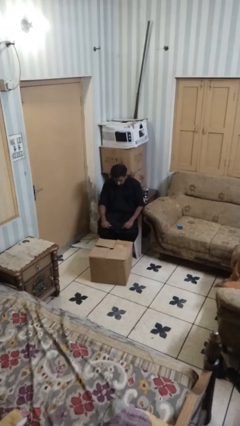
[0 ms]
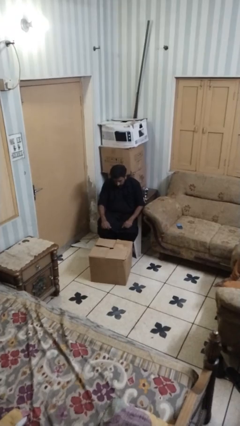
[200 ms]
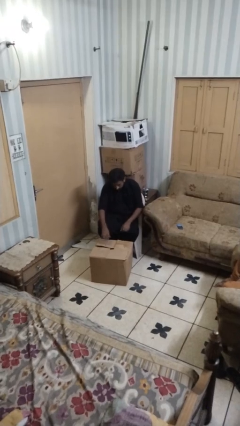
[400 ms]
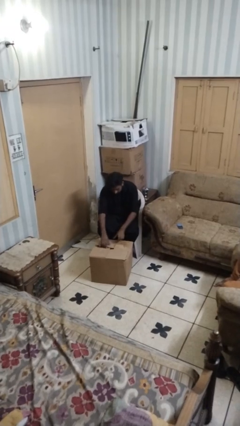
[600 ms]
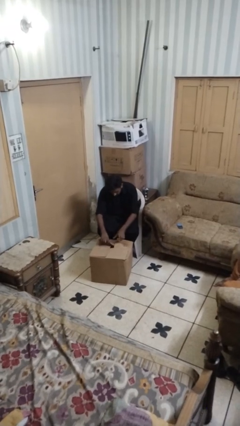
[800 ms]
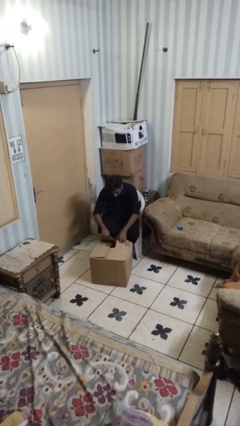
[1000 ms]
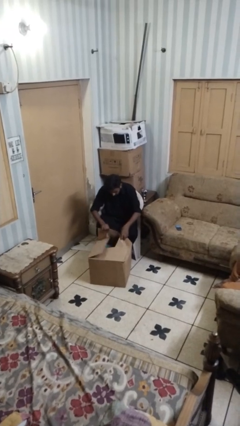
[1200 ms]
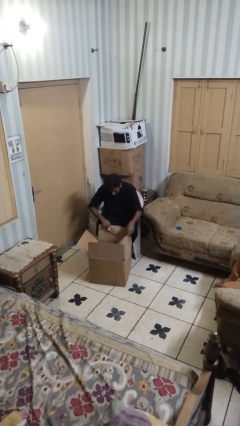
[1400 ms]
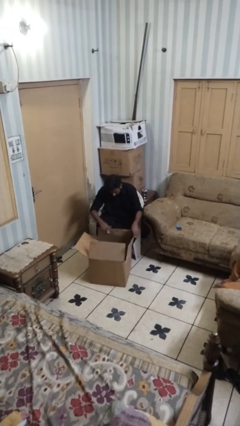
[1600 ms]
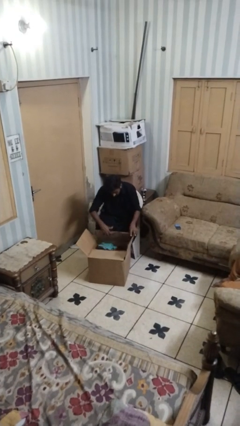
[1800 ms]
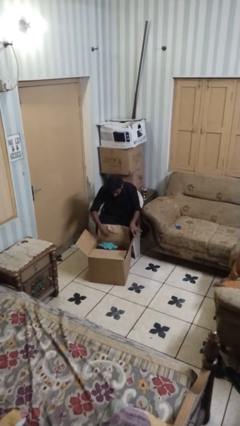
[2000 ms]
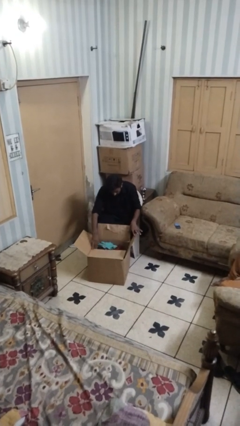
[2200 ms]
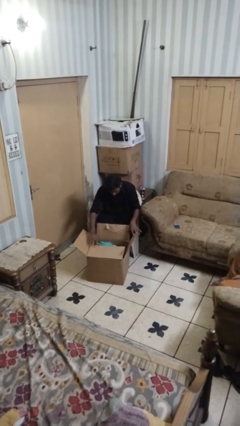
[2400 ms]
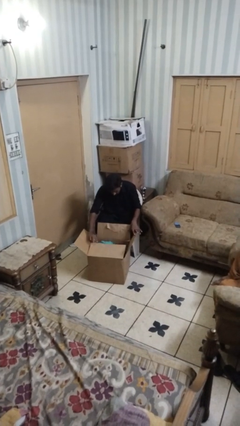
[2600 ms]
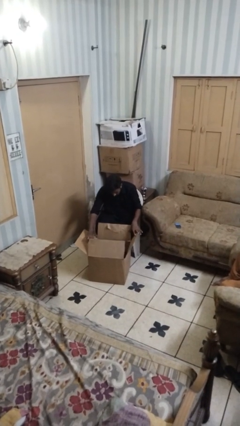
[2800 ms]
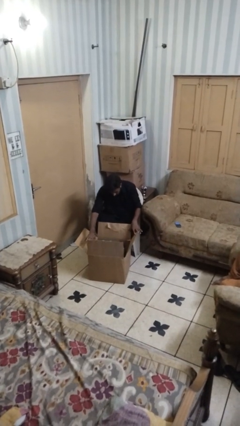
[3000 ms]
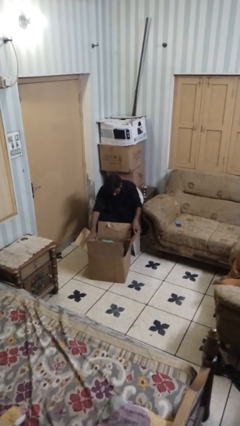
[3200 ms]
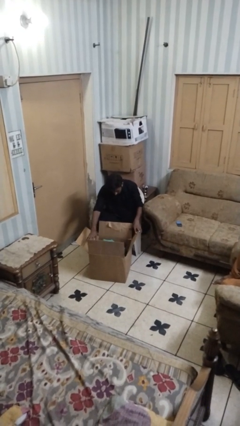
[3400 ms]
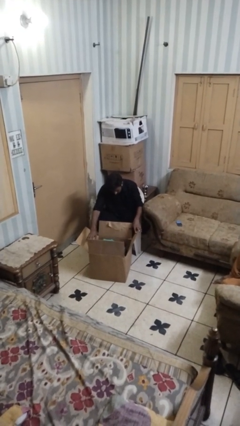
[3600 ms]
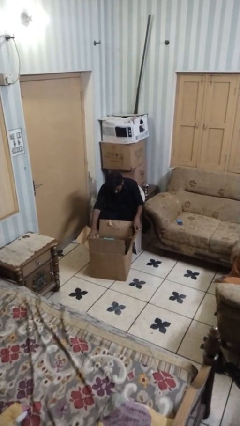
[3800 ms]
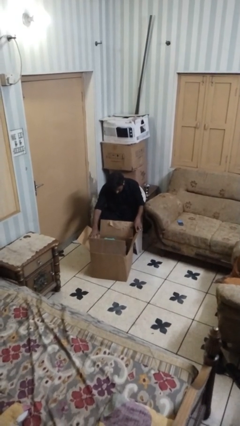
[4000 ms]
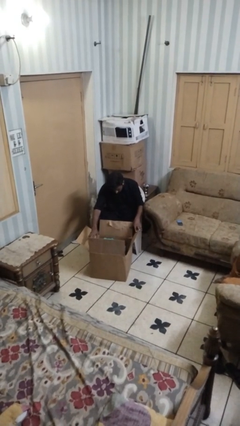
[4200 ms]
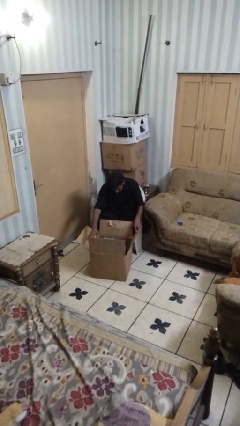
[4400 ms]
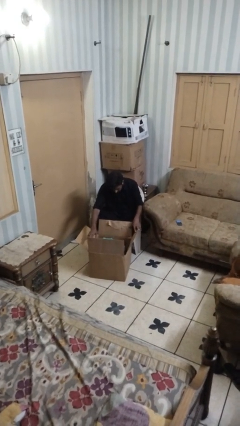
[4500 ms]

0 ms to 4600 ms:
person opens box

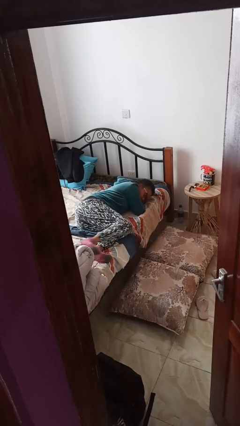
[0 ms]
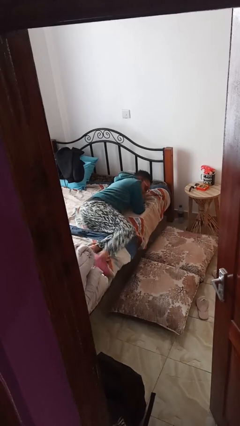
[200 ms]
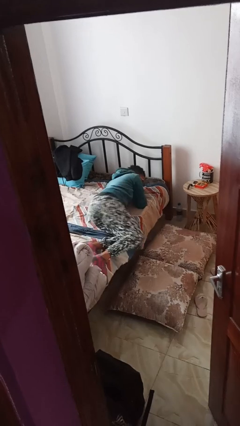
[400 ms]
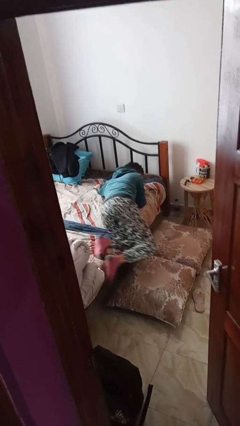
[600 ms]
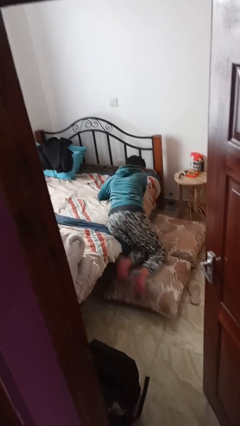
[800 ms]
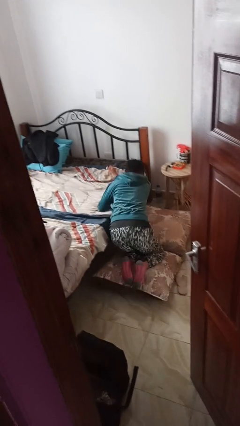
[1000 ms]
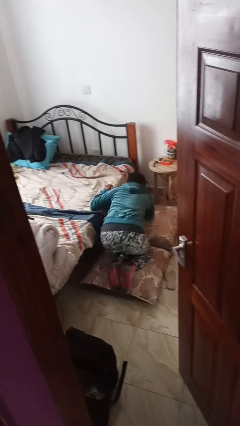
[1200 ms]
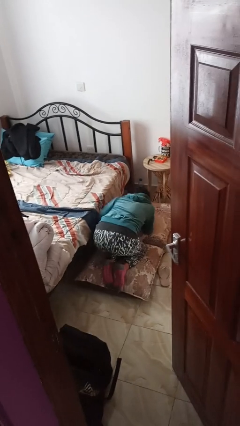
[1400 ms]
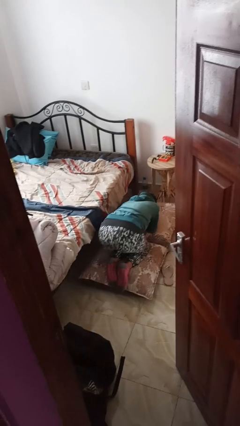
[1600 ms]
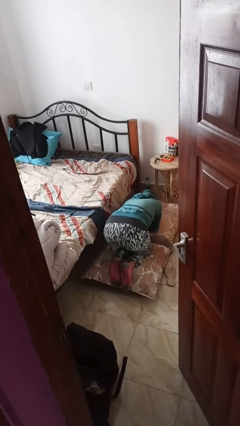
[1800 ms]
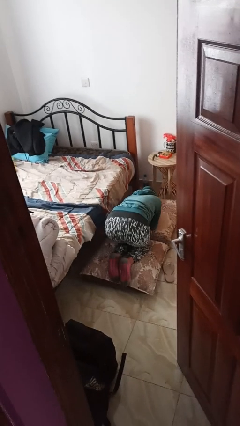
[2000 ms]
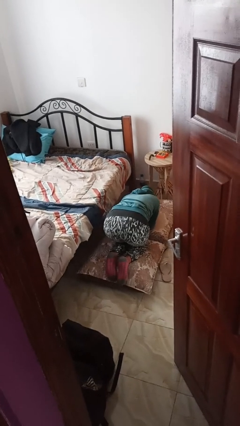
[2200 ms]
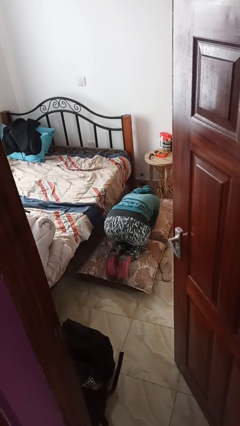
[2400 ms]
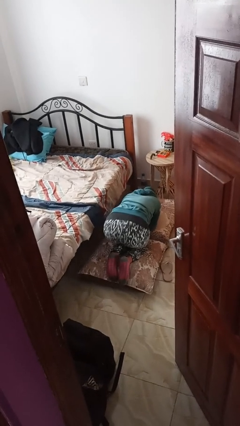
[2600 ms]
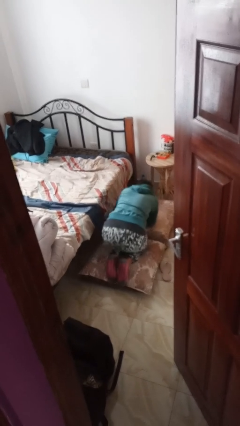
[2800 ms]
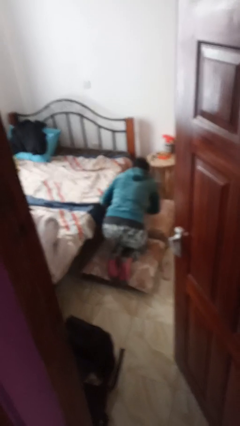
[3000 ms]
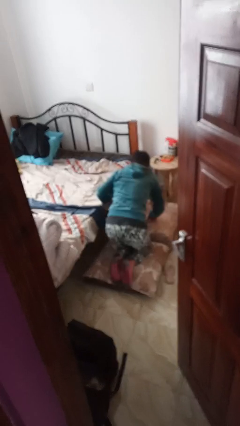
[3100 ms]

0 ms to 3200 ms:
person falls from bed

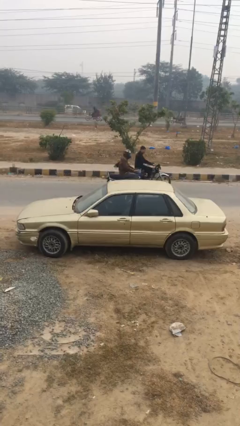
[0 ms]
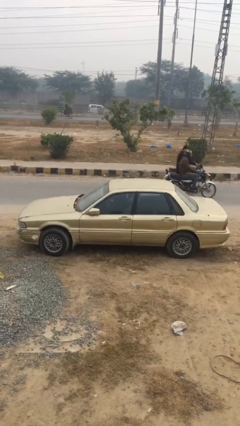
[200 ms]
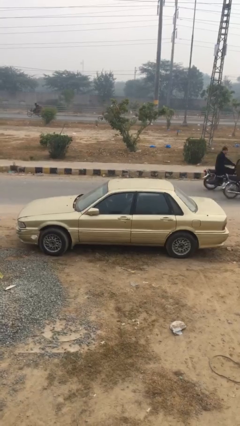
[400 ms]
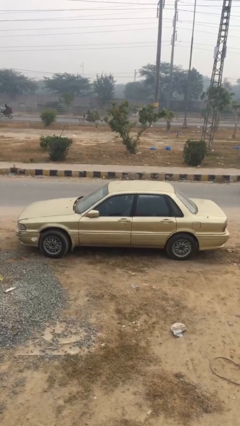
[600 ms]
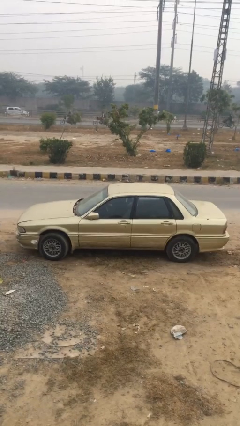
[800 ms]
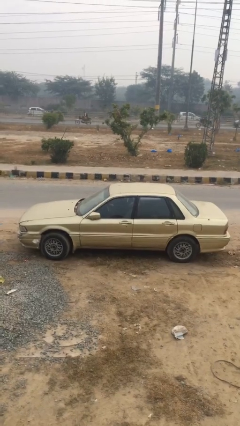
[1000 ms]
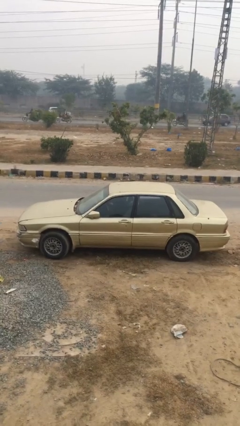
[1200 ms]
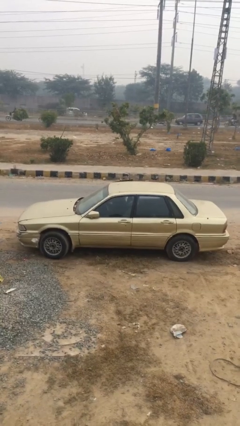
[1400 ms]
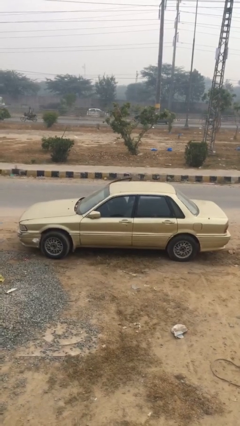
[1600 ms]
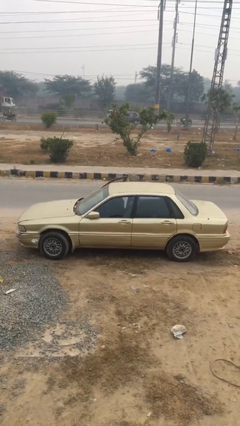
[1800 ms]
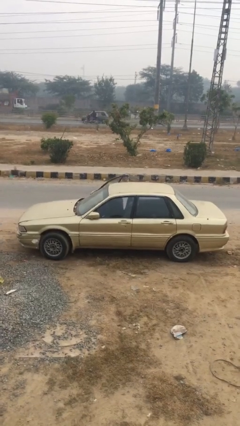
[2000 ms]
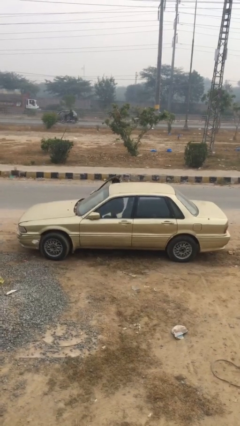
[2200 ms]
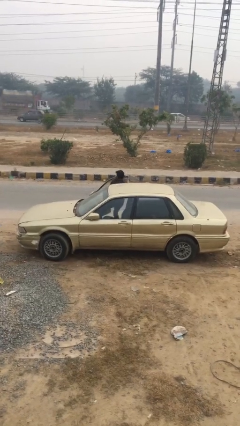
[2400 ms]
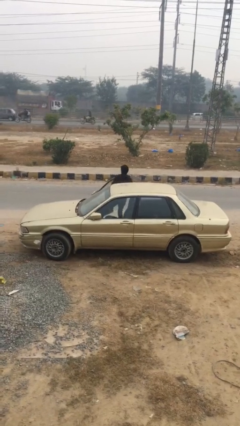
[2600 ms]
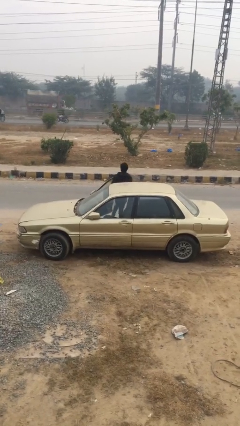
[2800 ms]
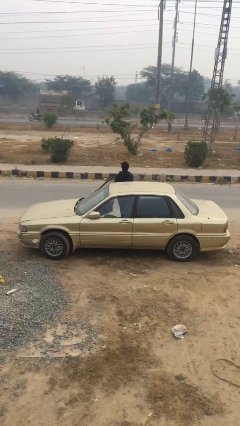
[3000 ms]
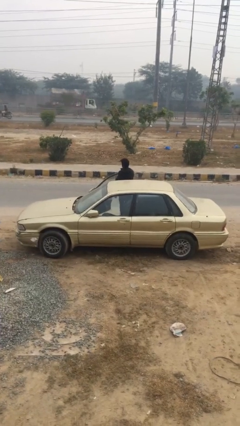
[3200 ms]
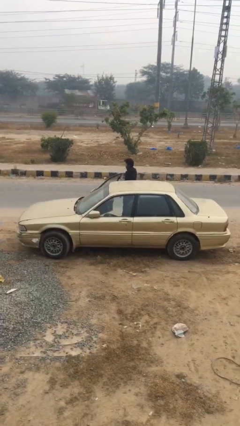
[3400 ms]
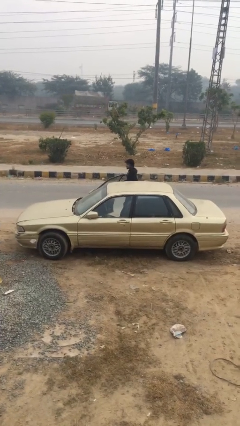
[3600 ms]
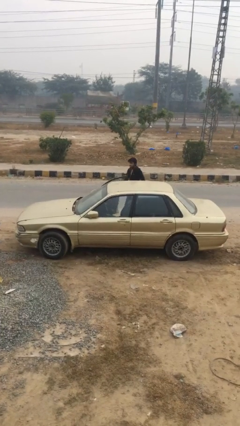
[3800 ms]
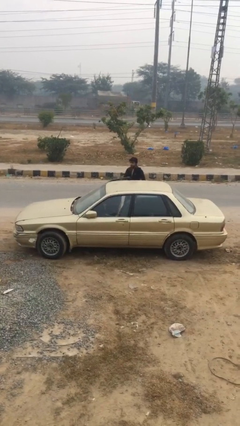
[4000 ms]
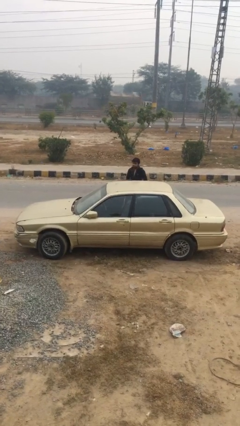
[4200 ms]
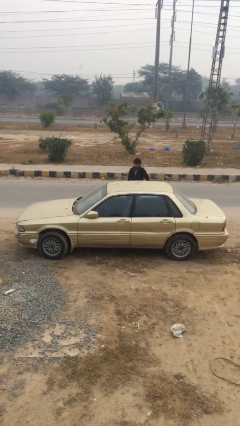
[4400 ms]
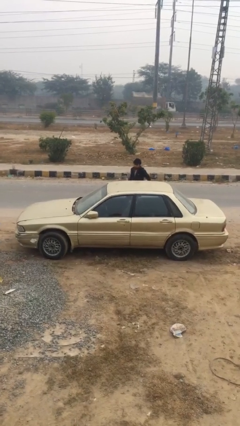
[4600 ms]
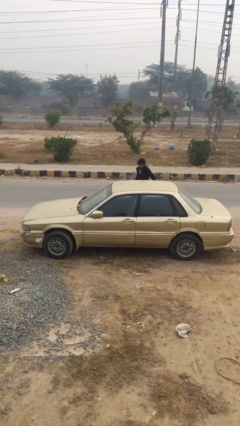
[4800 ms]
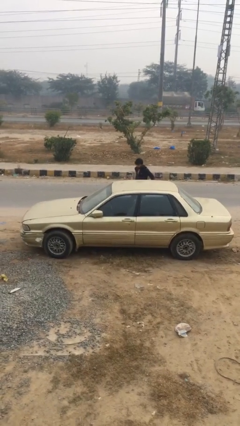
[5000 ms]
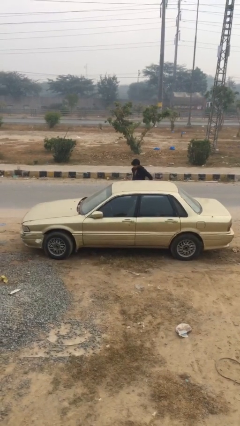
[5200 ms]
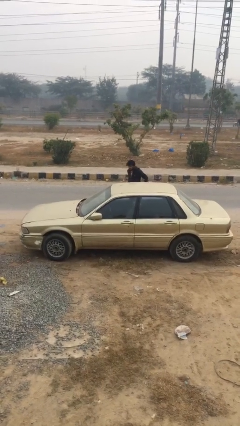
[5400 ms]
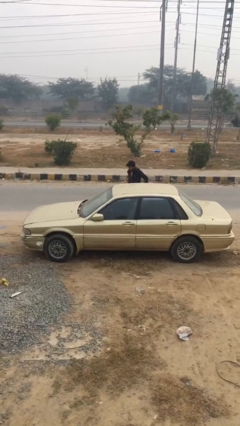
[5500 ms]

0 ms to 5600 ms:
car drops off person

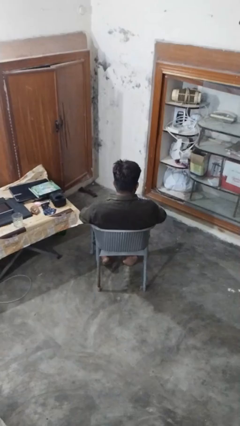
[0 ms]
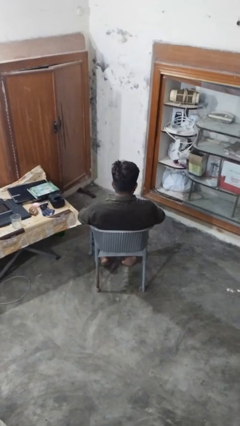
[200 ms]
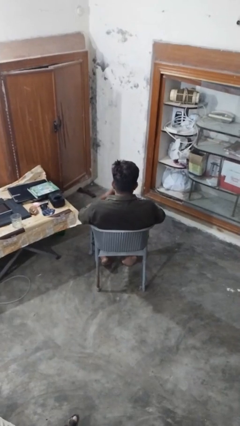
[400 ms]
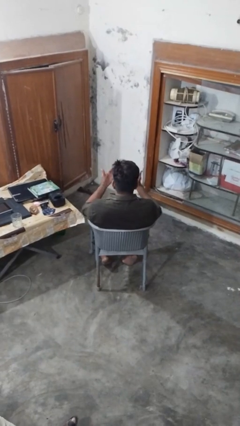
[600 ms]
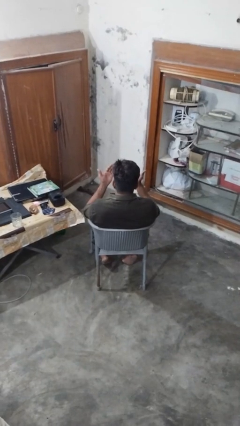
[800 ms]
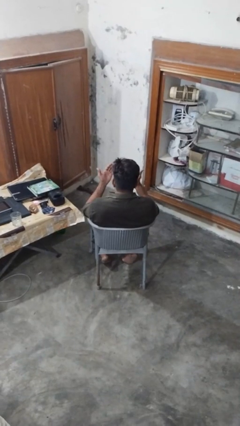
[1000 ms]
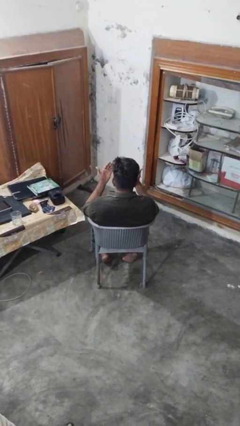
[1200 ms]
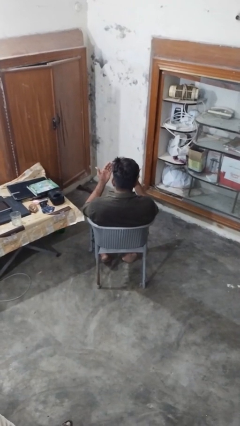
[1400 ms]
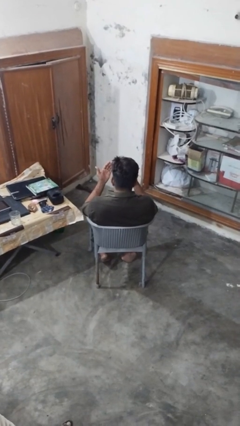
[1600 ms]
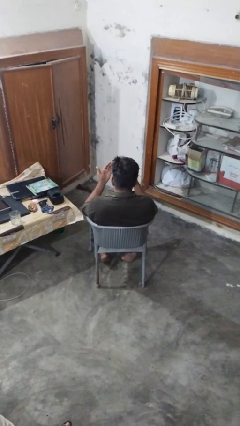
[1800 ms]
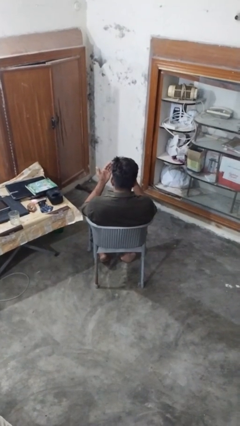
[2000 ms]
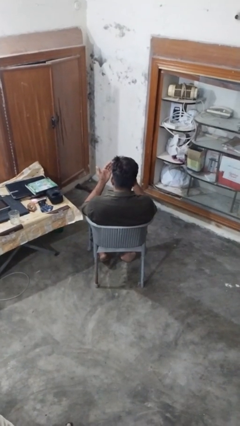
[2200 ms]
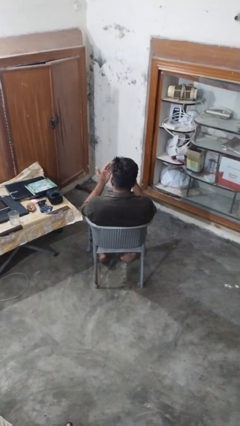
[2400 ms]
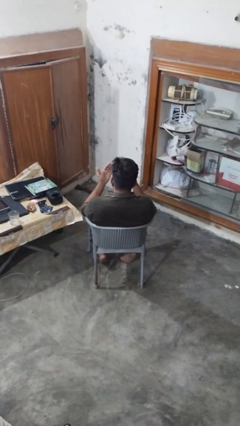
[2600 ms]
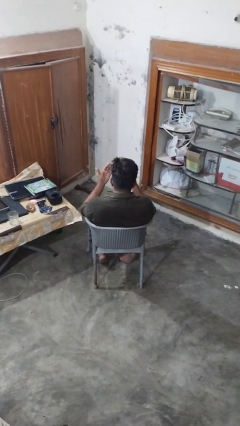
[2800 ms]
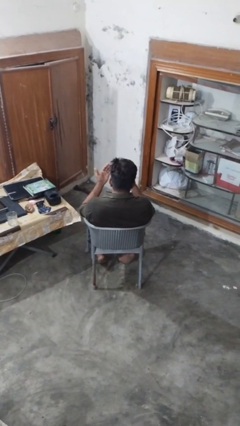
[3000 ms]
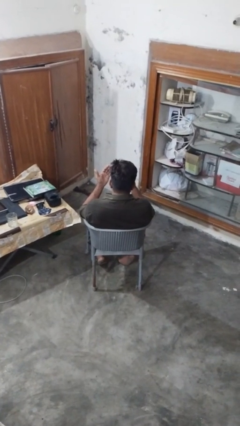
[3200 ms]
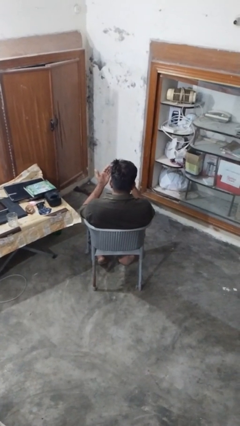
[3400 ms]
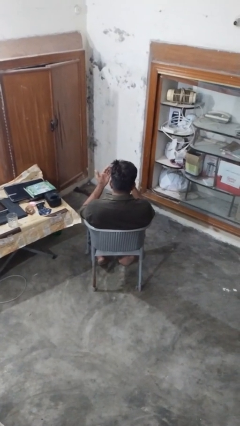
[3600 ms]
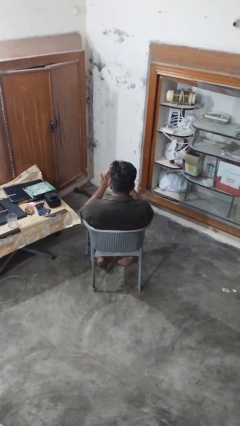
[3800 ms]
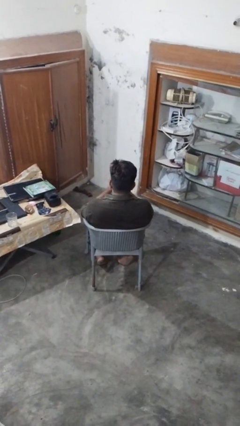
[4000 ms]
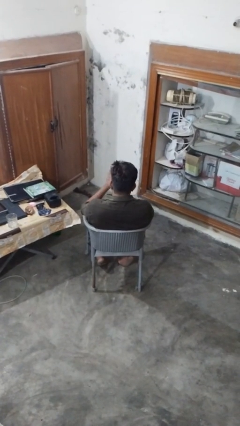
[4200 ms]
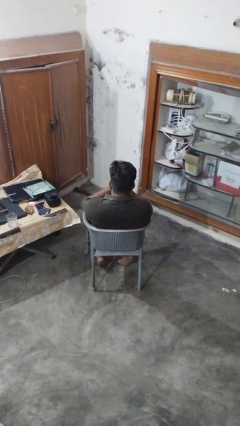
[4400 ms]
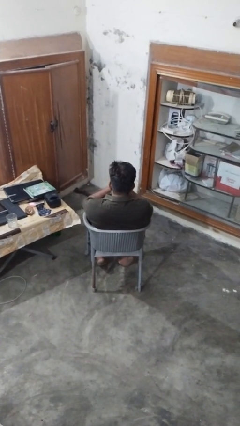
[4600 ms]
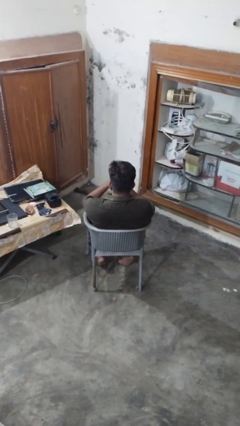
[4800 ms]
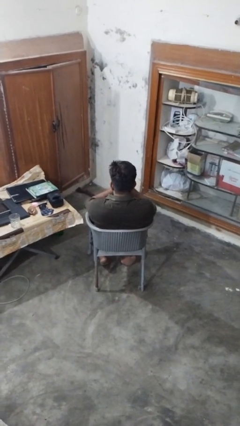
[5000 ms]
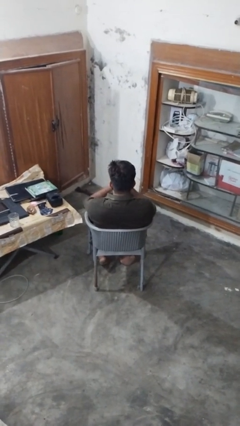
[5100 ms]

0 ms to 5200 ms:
person looks at hands in lap
